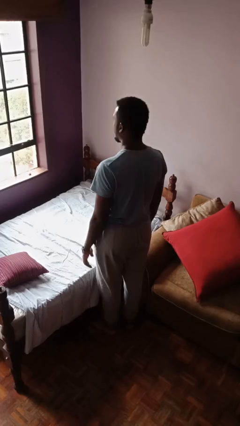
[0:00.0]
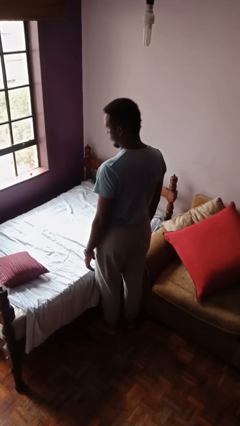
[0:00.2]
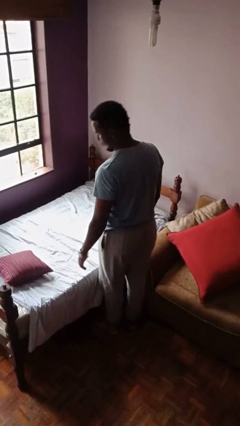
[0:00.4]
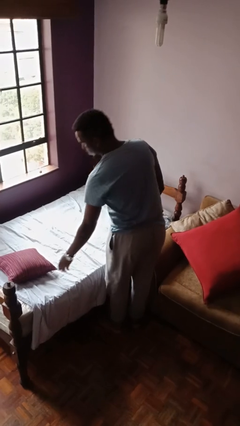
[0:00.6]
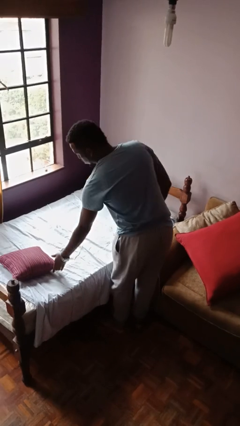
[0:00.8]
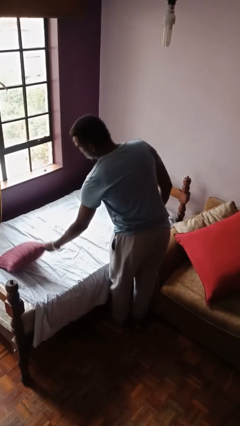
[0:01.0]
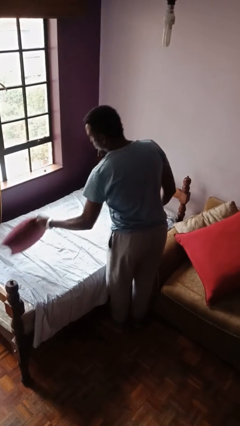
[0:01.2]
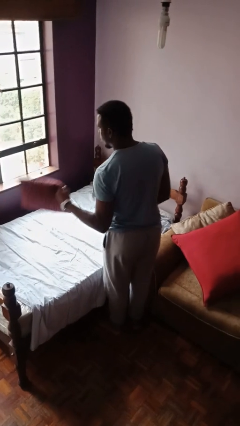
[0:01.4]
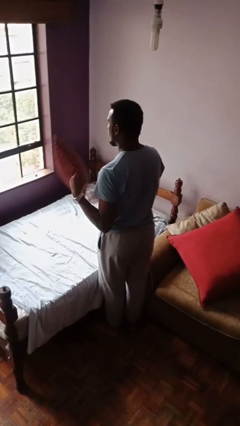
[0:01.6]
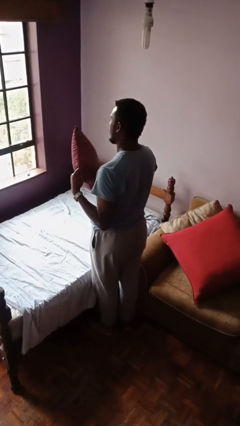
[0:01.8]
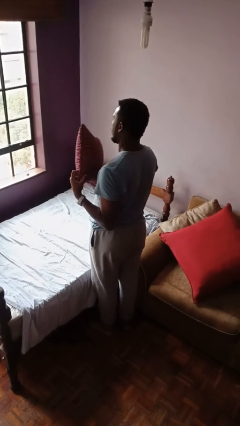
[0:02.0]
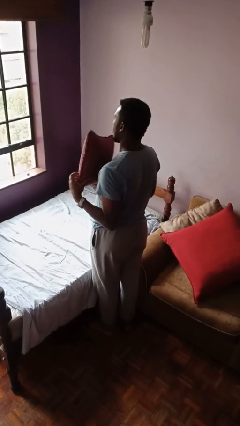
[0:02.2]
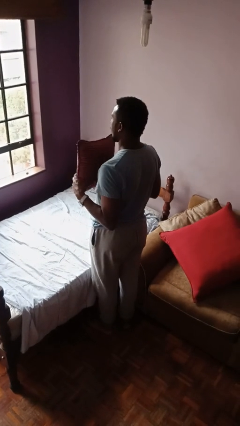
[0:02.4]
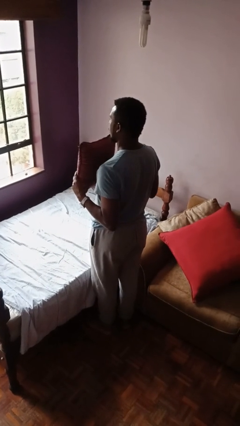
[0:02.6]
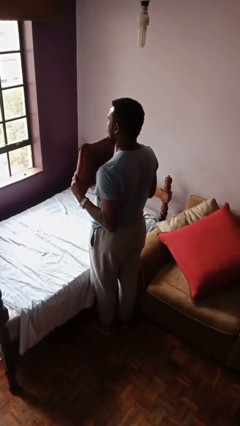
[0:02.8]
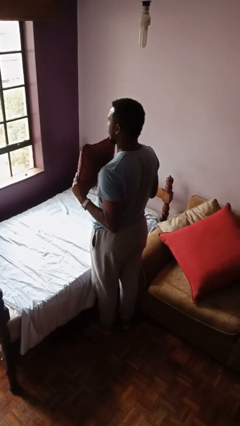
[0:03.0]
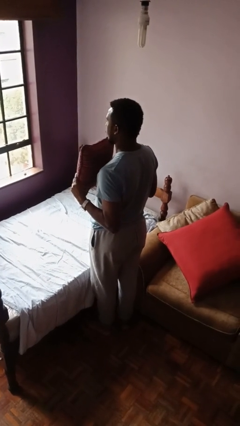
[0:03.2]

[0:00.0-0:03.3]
person picks up object from bed

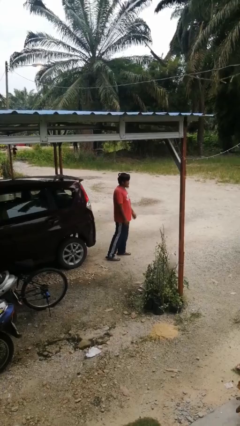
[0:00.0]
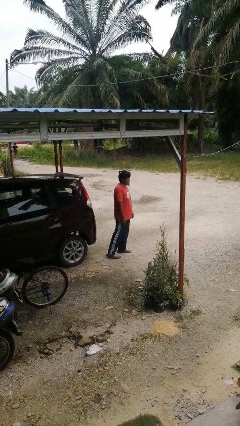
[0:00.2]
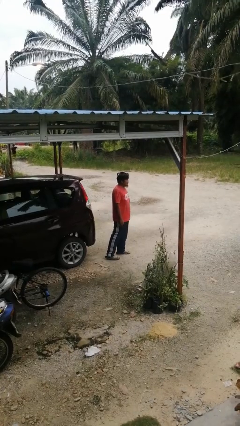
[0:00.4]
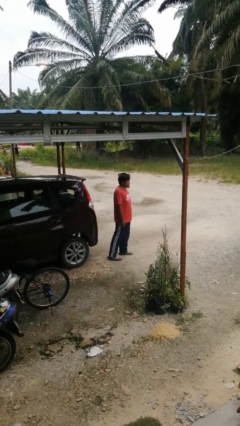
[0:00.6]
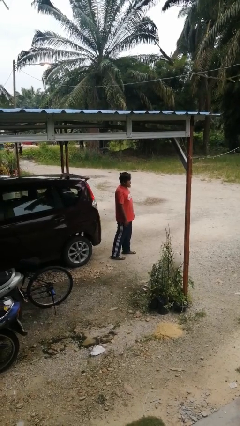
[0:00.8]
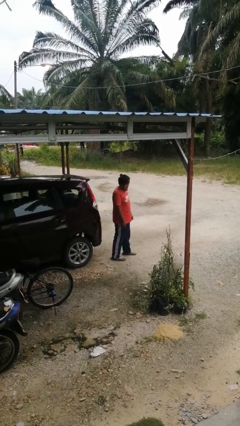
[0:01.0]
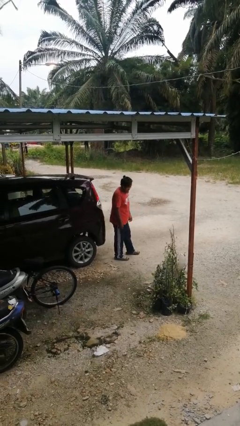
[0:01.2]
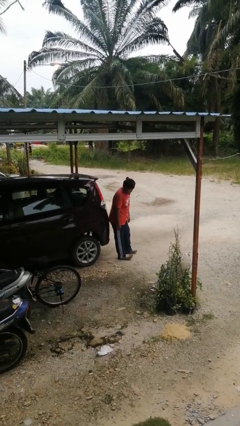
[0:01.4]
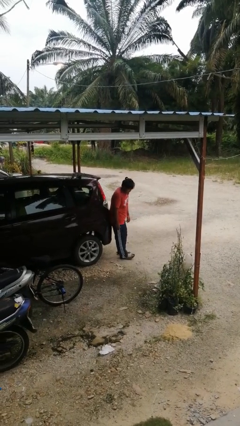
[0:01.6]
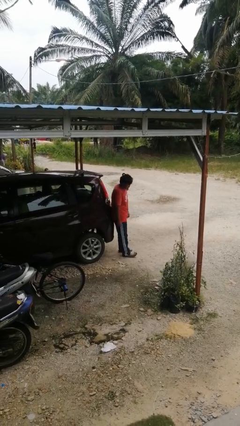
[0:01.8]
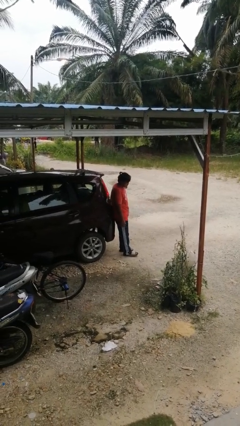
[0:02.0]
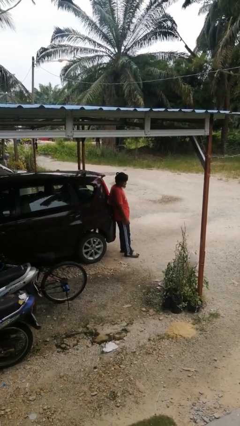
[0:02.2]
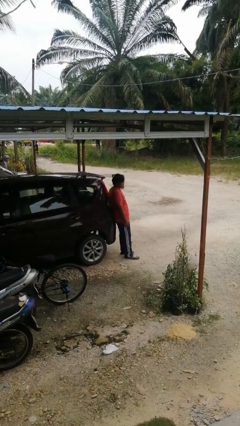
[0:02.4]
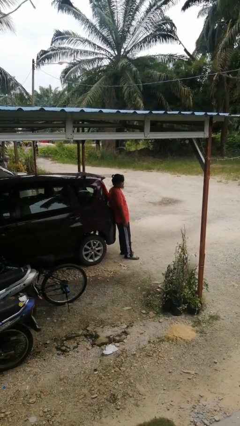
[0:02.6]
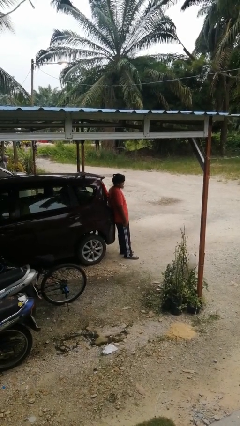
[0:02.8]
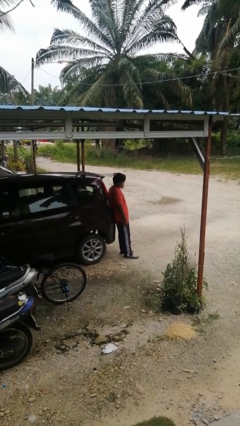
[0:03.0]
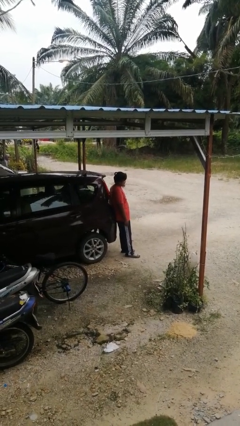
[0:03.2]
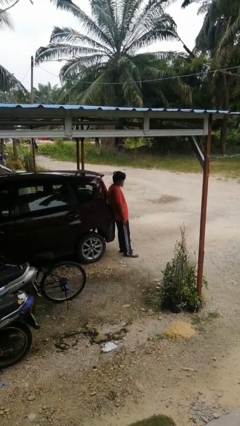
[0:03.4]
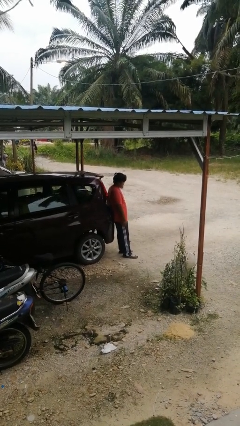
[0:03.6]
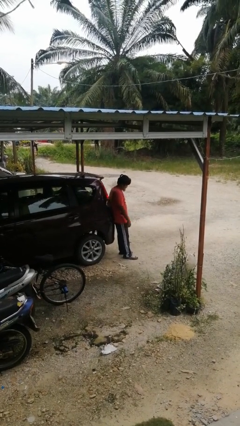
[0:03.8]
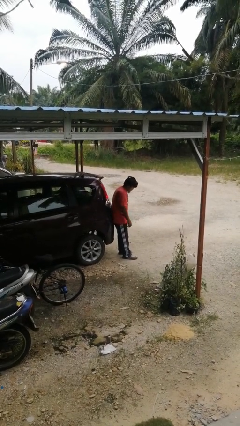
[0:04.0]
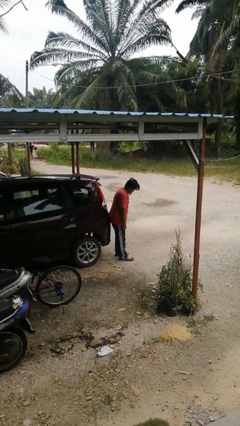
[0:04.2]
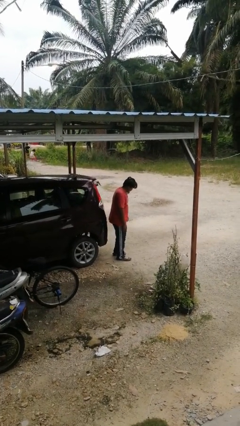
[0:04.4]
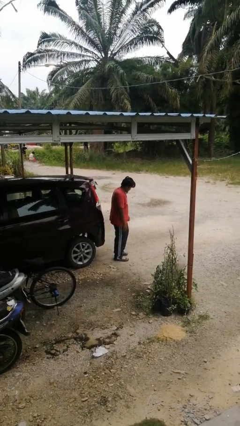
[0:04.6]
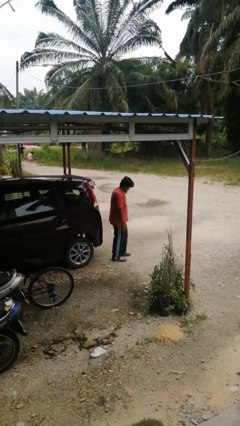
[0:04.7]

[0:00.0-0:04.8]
person leans against car

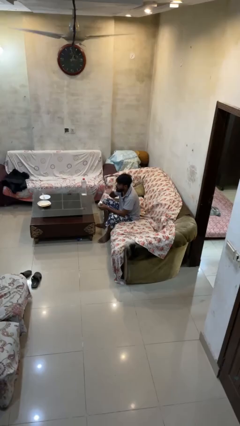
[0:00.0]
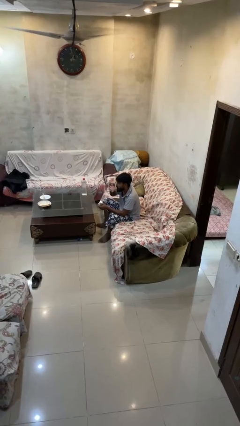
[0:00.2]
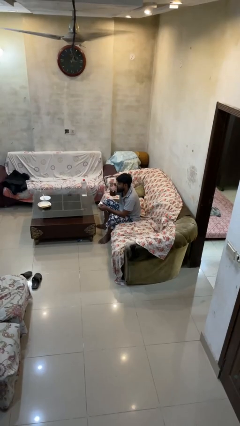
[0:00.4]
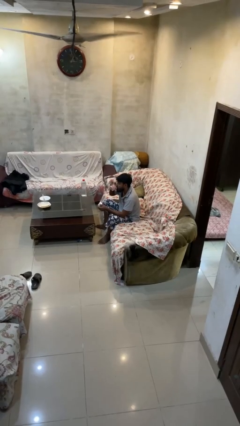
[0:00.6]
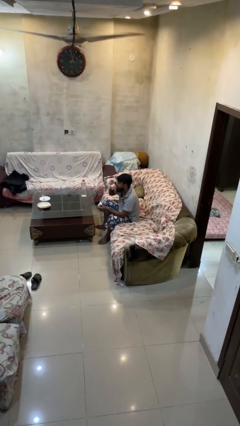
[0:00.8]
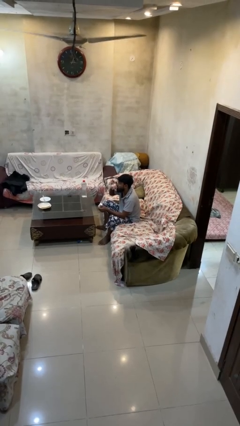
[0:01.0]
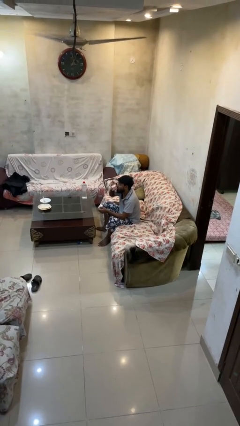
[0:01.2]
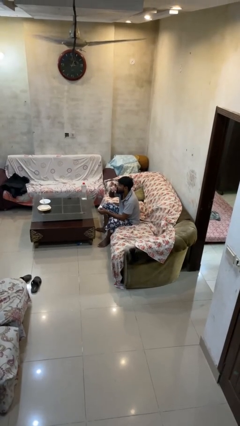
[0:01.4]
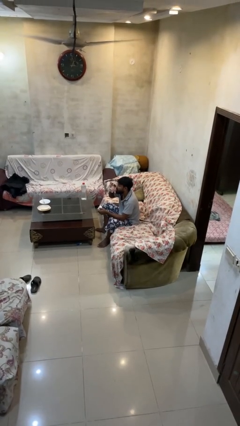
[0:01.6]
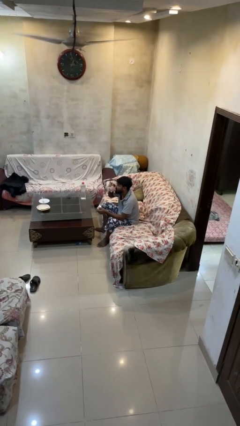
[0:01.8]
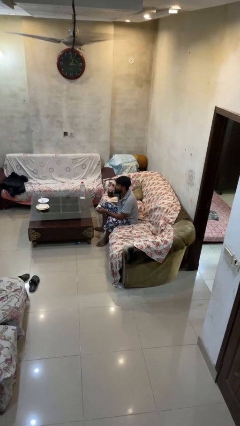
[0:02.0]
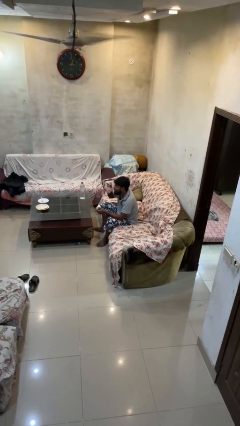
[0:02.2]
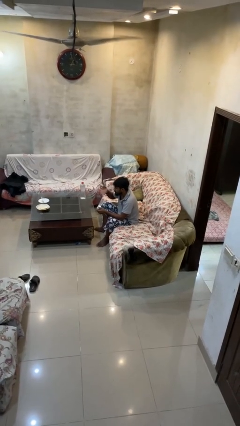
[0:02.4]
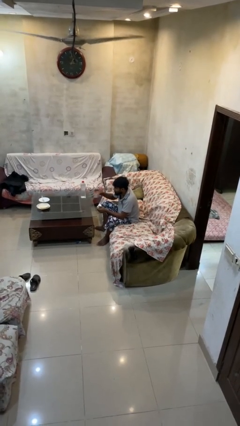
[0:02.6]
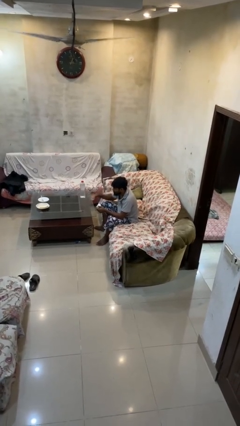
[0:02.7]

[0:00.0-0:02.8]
person drinks from cup

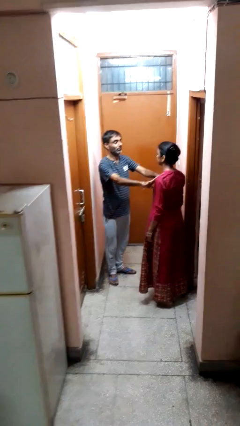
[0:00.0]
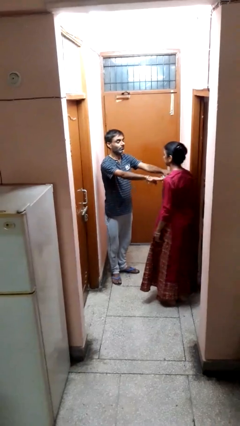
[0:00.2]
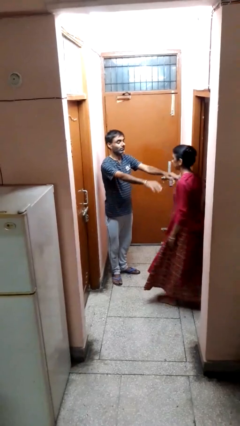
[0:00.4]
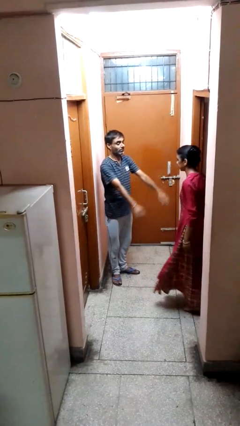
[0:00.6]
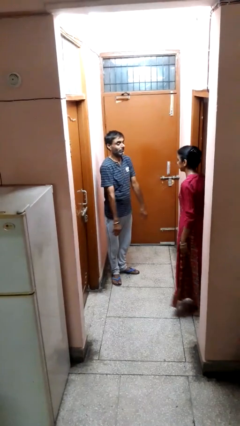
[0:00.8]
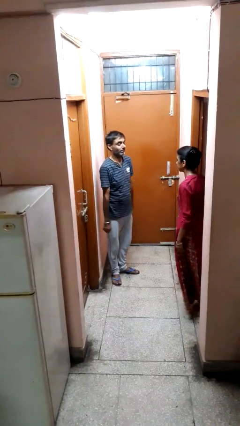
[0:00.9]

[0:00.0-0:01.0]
person shoves person

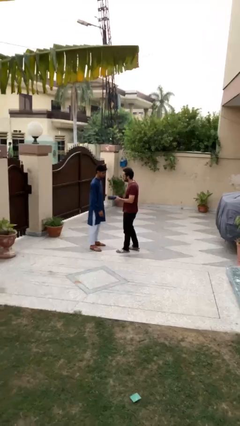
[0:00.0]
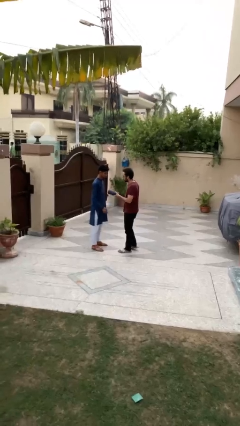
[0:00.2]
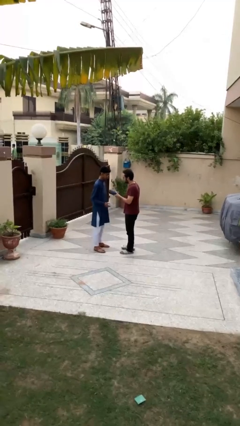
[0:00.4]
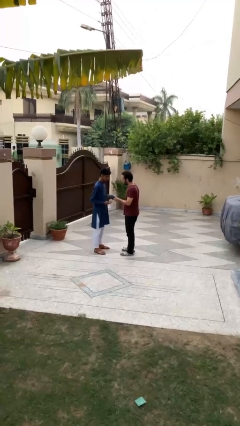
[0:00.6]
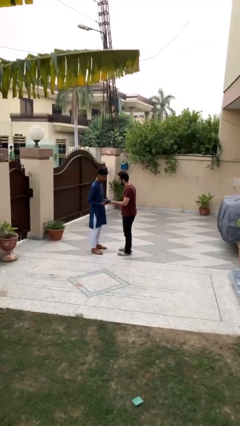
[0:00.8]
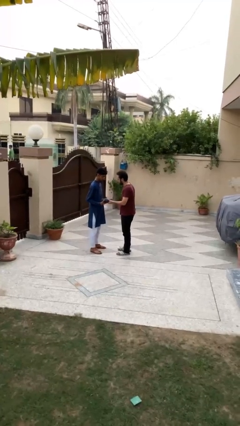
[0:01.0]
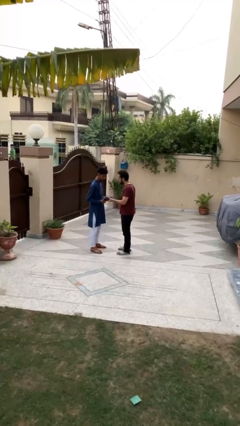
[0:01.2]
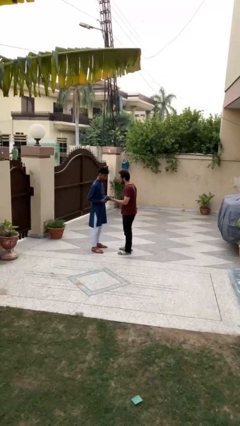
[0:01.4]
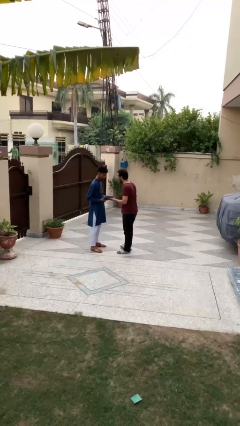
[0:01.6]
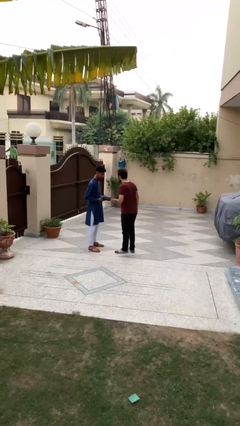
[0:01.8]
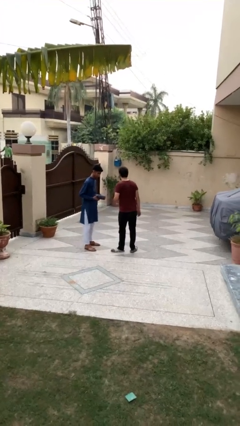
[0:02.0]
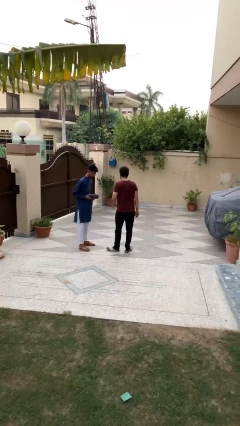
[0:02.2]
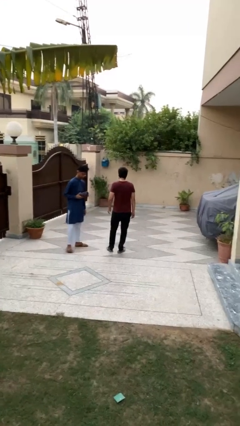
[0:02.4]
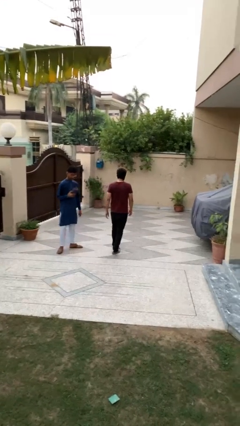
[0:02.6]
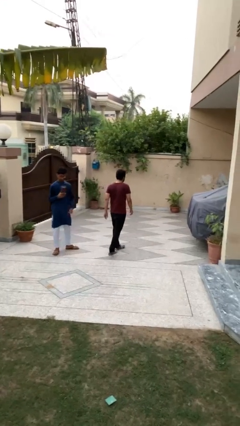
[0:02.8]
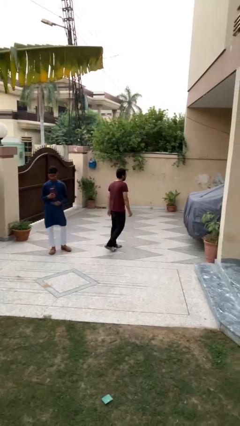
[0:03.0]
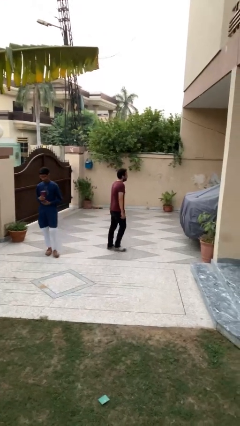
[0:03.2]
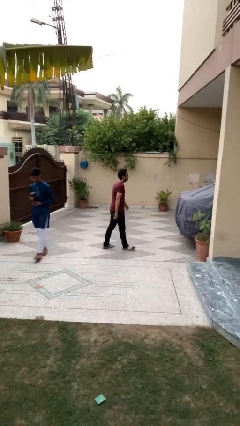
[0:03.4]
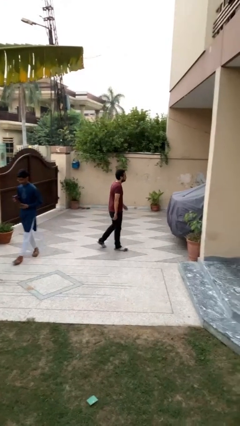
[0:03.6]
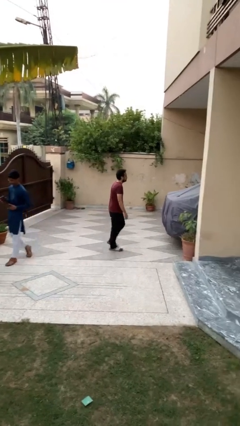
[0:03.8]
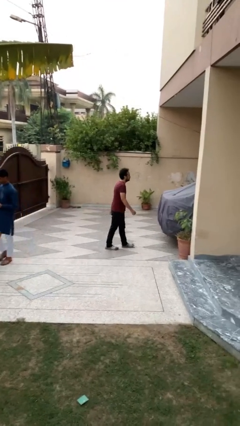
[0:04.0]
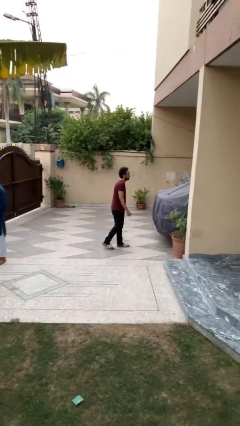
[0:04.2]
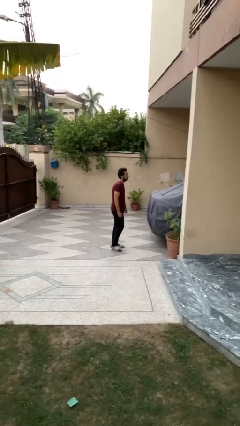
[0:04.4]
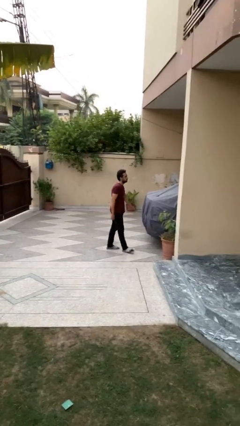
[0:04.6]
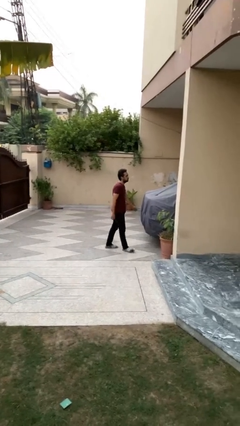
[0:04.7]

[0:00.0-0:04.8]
person transfers object to person

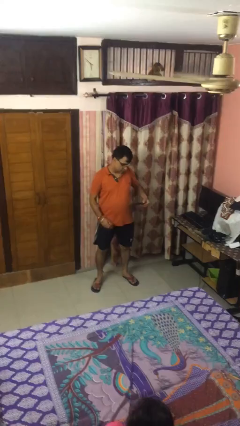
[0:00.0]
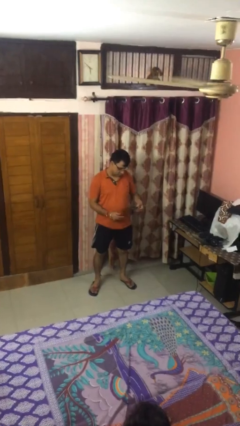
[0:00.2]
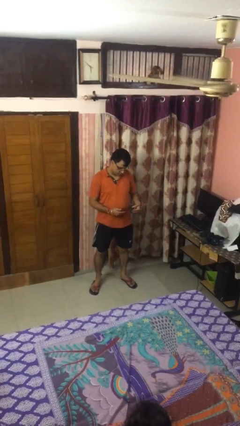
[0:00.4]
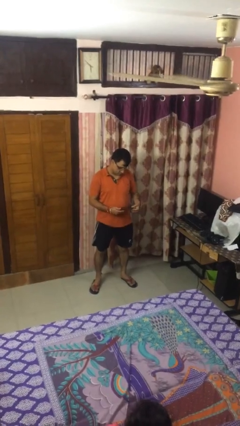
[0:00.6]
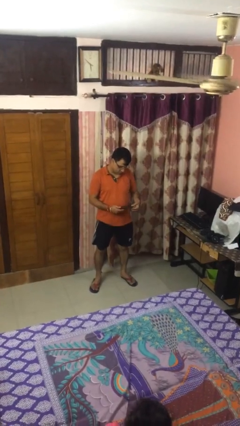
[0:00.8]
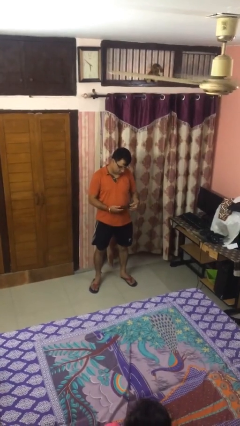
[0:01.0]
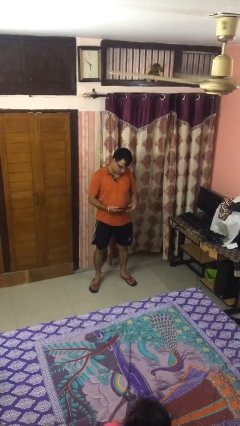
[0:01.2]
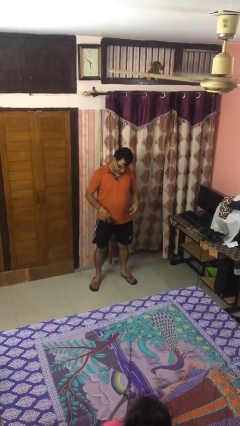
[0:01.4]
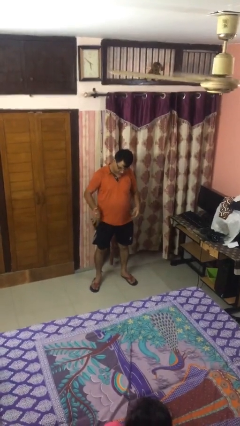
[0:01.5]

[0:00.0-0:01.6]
person takes phone from pocket
